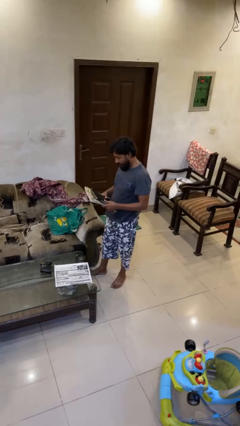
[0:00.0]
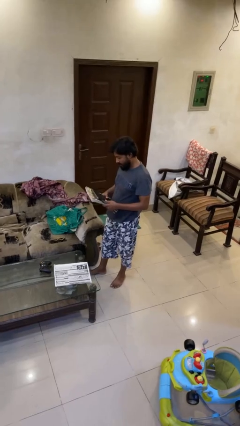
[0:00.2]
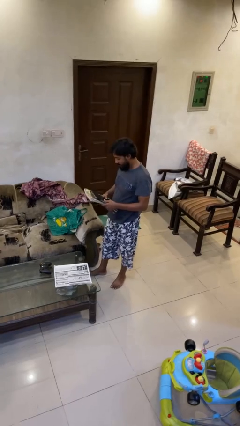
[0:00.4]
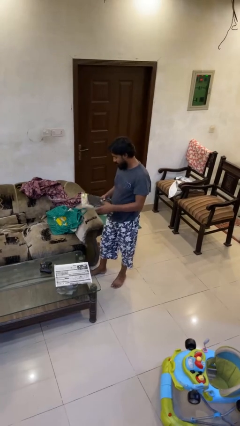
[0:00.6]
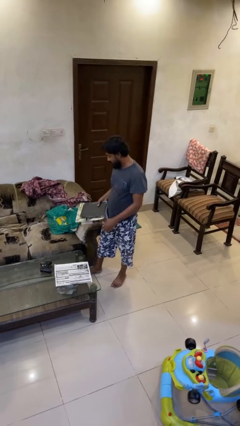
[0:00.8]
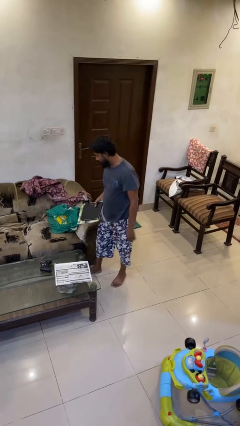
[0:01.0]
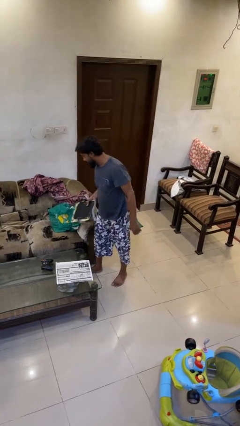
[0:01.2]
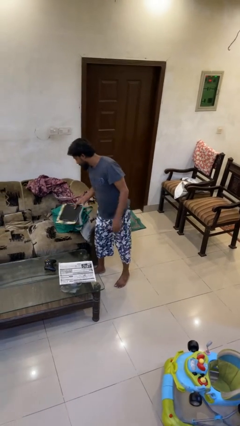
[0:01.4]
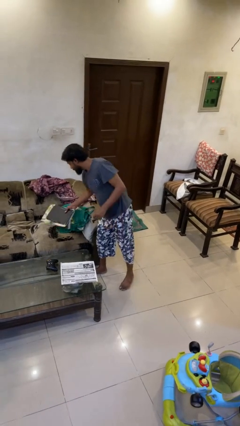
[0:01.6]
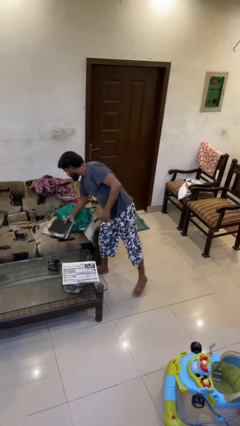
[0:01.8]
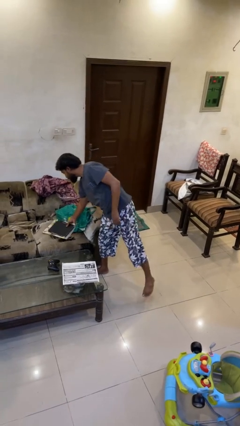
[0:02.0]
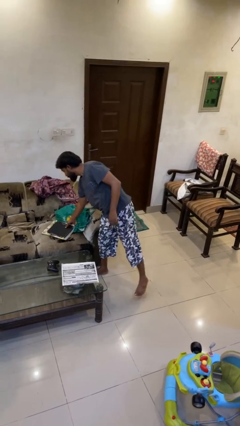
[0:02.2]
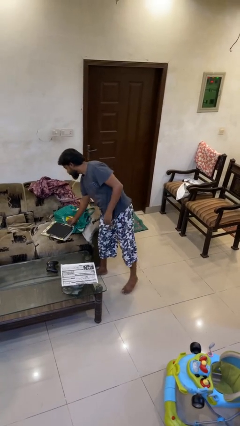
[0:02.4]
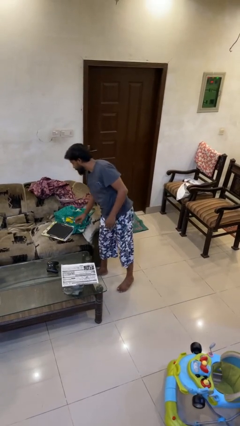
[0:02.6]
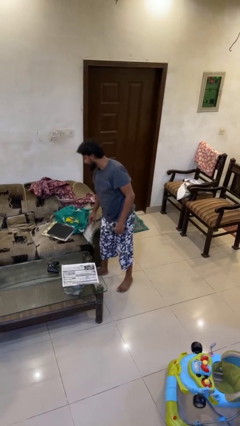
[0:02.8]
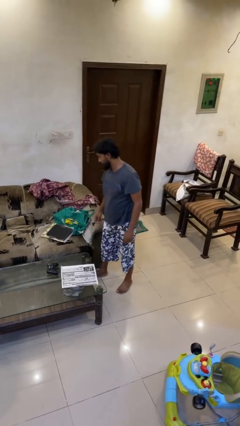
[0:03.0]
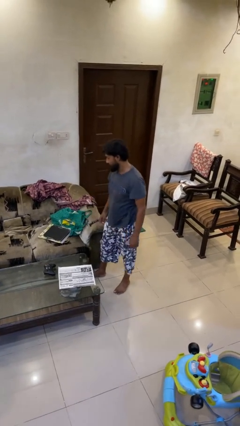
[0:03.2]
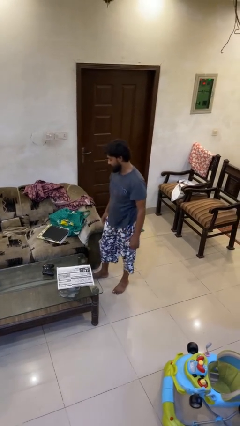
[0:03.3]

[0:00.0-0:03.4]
person puts down object on couch

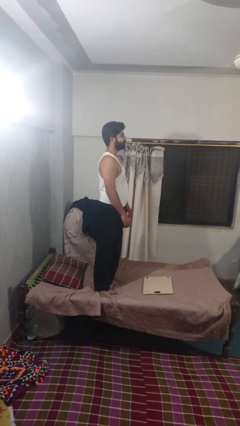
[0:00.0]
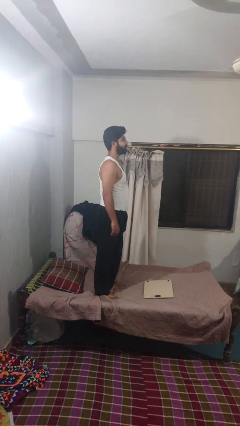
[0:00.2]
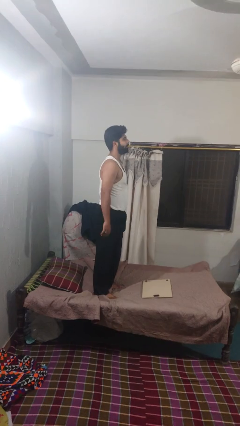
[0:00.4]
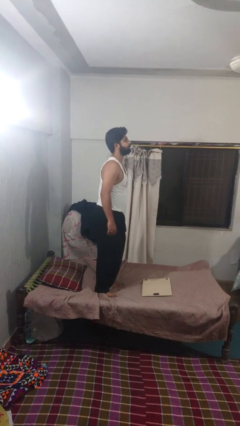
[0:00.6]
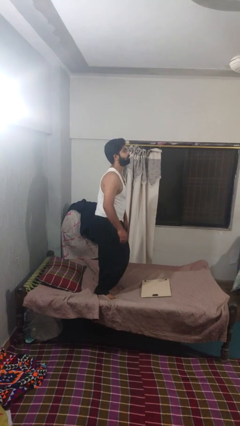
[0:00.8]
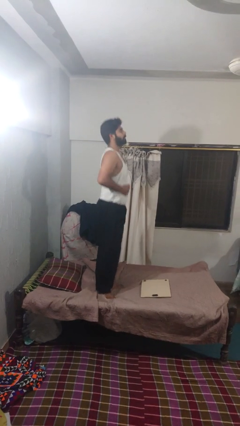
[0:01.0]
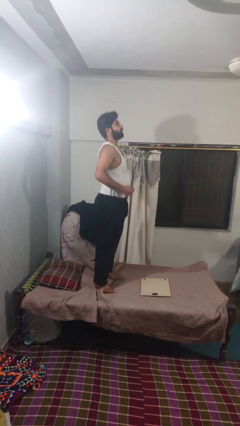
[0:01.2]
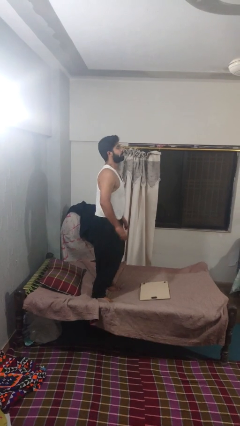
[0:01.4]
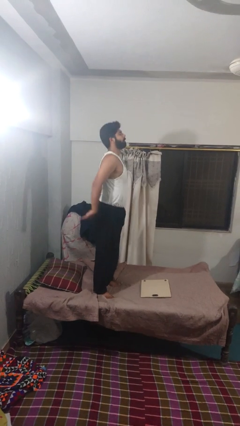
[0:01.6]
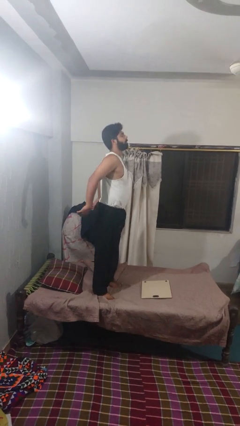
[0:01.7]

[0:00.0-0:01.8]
person jumps on bed

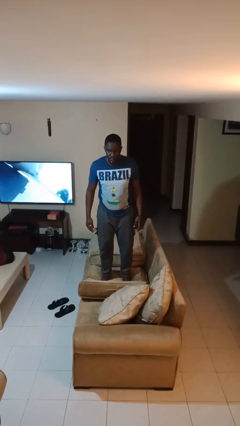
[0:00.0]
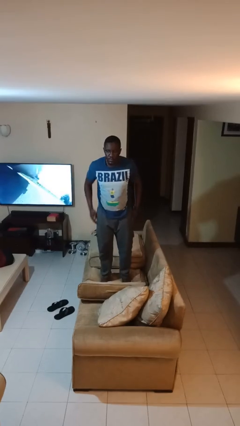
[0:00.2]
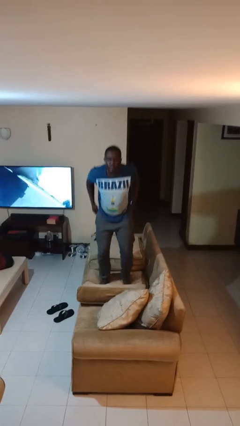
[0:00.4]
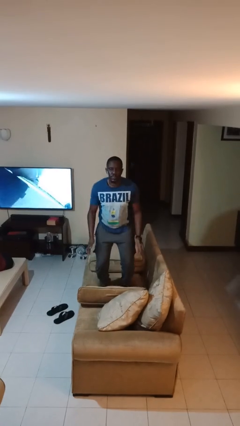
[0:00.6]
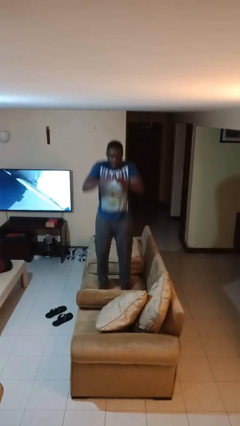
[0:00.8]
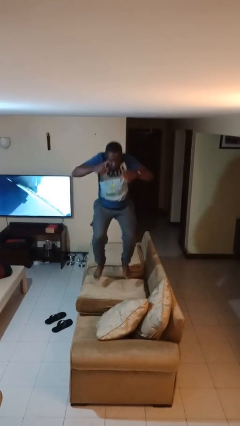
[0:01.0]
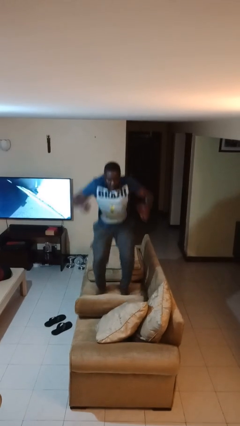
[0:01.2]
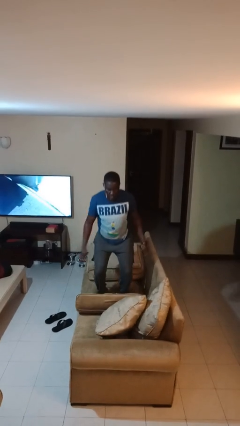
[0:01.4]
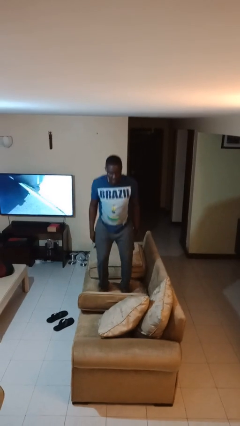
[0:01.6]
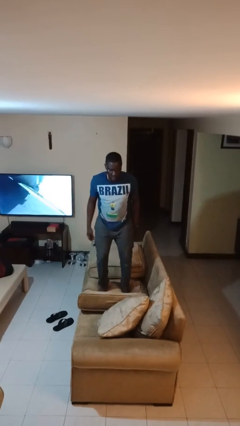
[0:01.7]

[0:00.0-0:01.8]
person jumps on couch

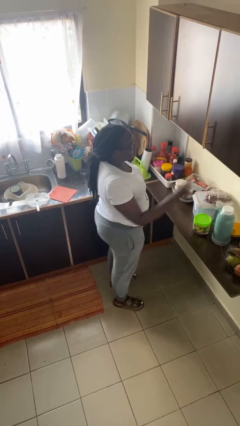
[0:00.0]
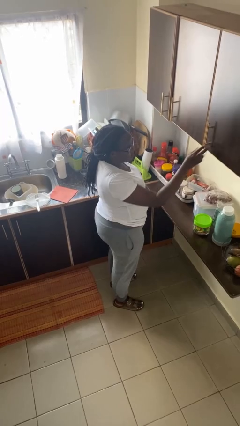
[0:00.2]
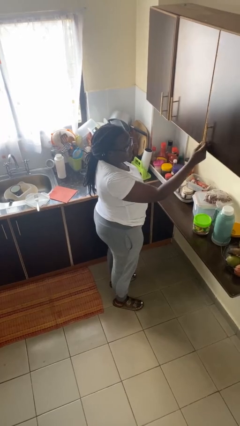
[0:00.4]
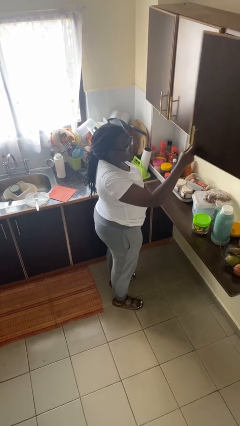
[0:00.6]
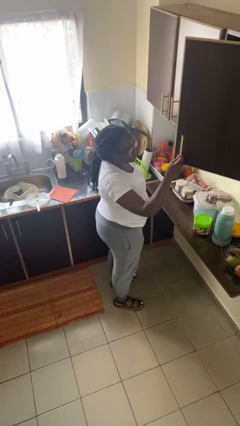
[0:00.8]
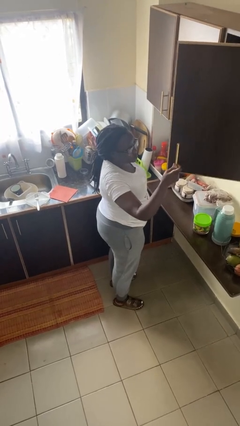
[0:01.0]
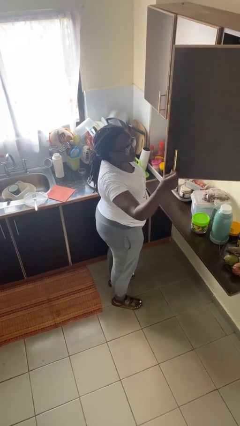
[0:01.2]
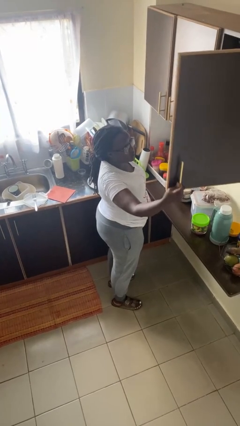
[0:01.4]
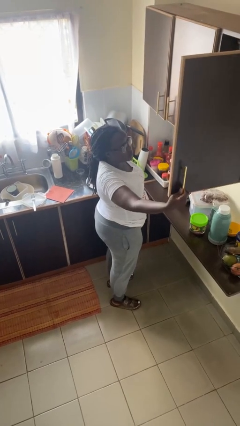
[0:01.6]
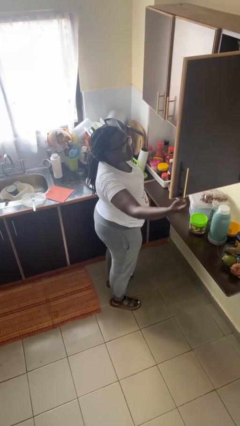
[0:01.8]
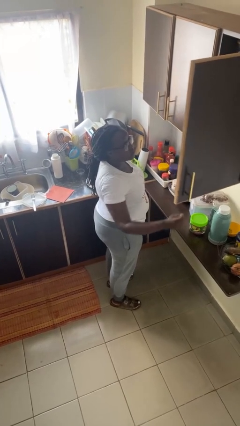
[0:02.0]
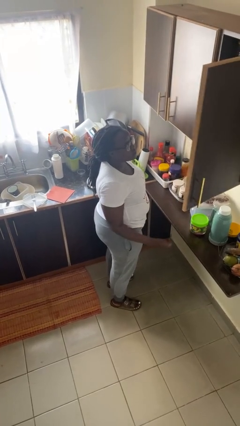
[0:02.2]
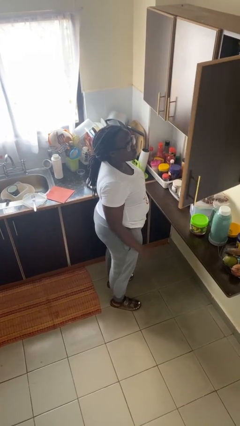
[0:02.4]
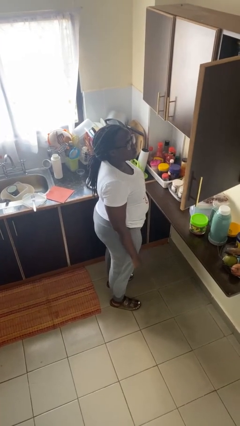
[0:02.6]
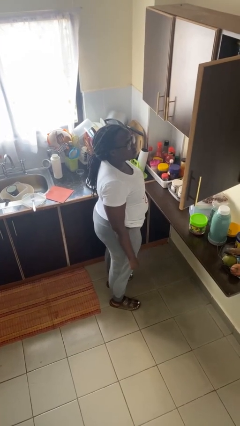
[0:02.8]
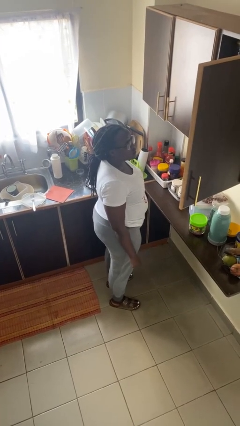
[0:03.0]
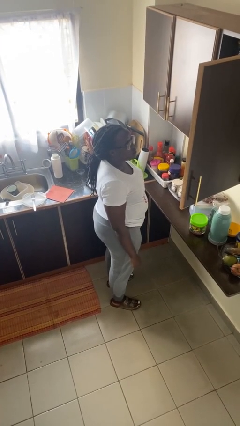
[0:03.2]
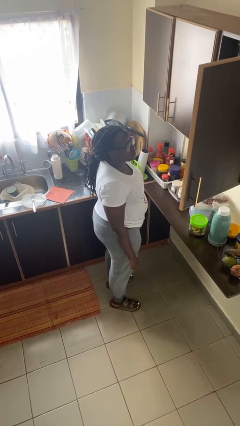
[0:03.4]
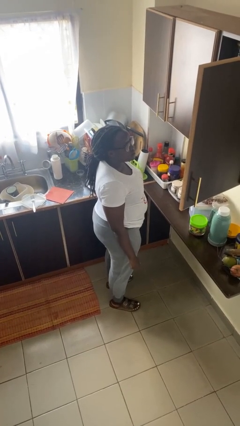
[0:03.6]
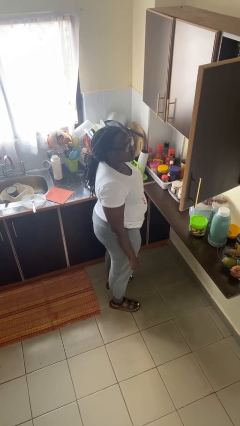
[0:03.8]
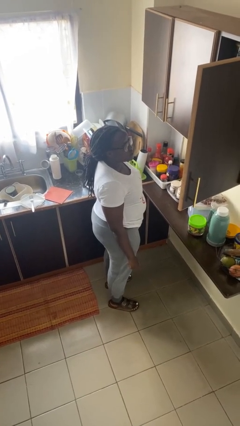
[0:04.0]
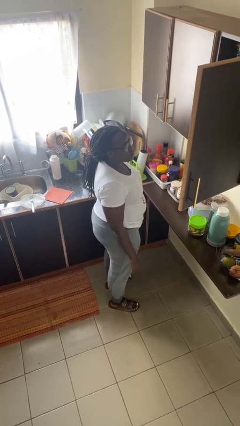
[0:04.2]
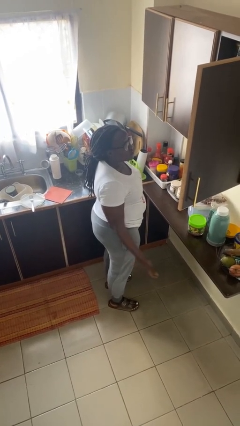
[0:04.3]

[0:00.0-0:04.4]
person opens cabinet

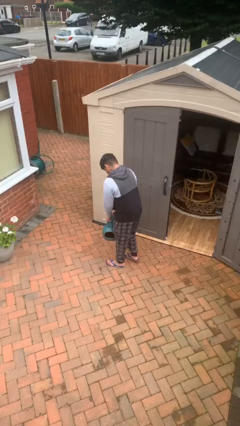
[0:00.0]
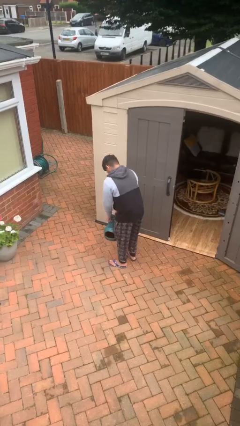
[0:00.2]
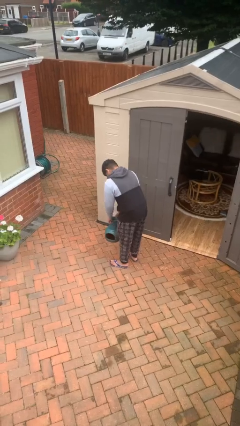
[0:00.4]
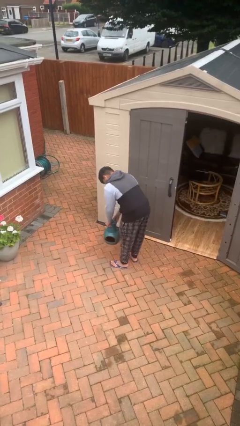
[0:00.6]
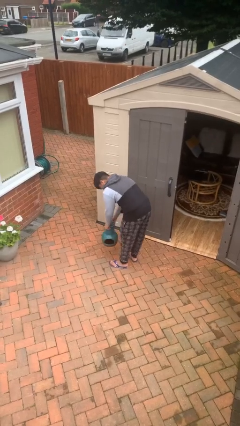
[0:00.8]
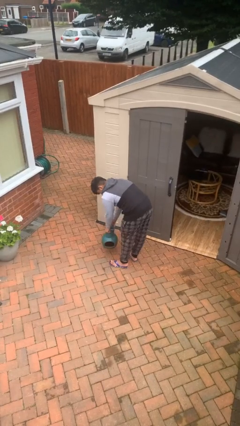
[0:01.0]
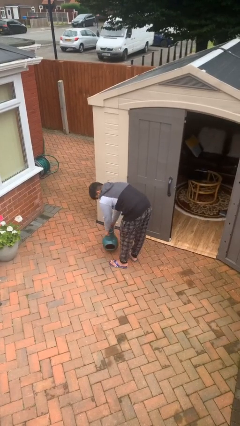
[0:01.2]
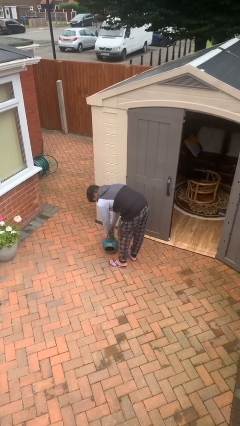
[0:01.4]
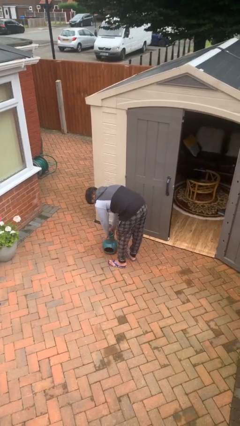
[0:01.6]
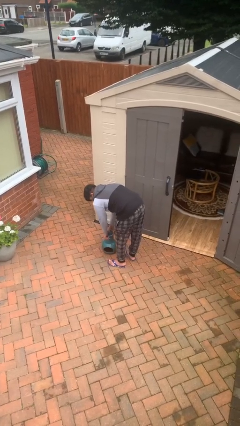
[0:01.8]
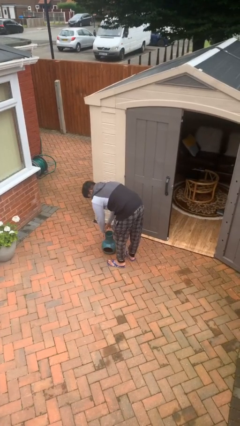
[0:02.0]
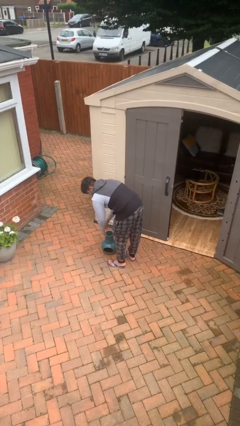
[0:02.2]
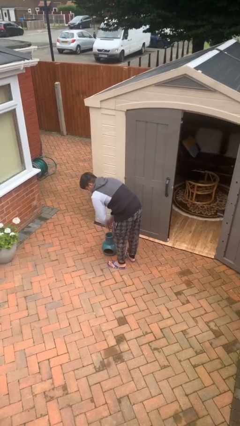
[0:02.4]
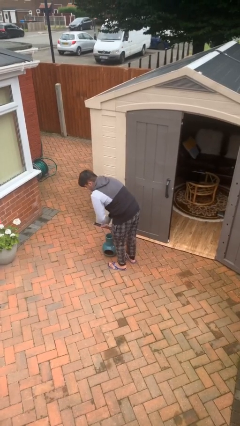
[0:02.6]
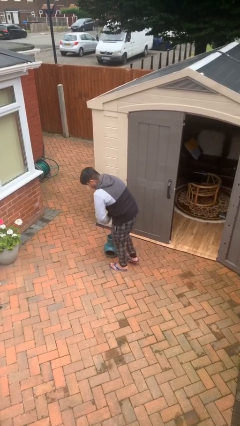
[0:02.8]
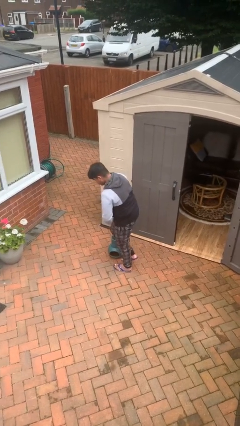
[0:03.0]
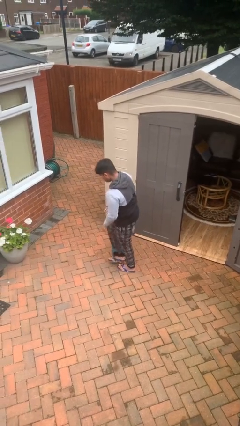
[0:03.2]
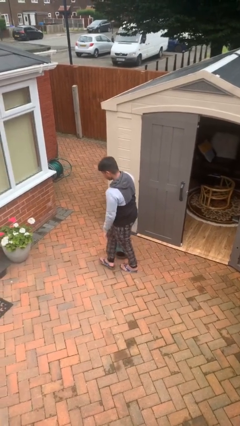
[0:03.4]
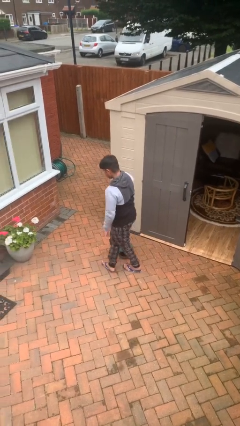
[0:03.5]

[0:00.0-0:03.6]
person puts down object on floor

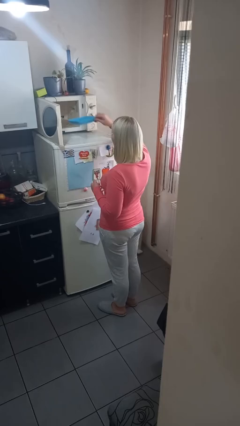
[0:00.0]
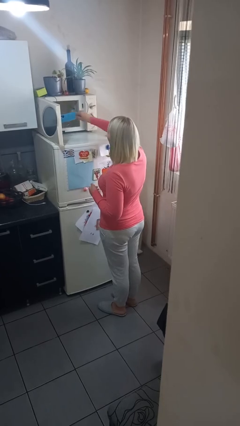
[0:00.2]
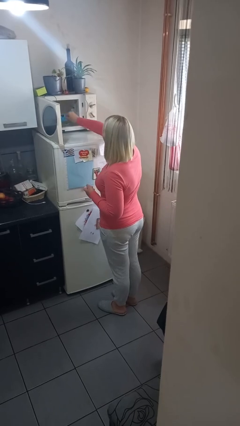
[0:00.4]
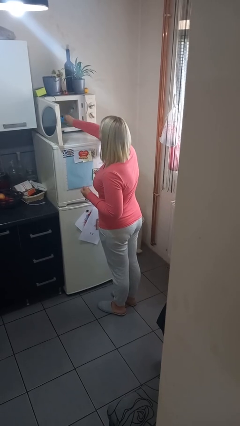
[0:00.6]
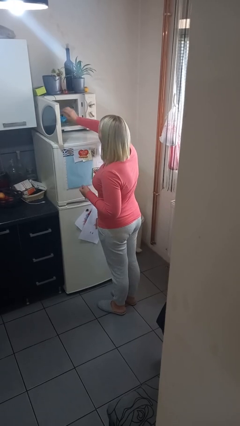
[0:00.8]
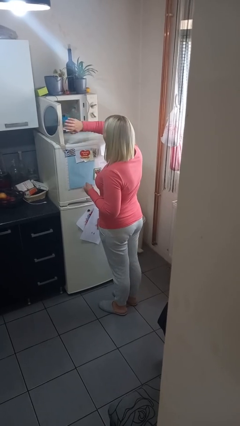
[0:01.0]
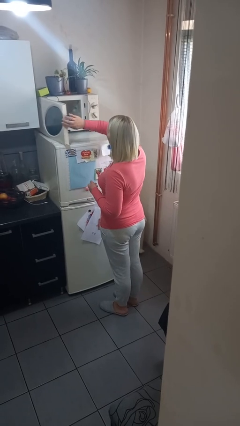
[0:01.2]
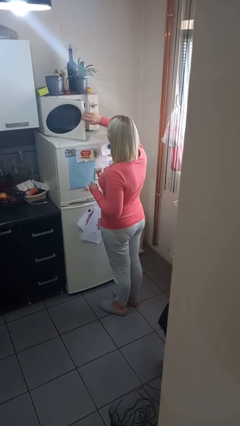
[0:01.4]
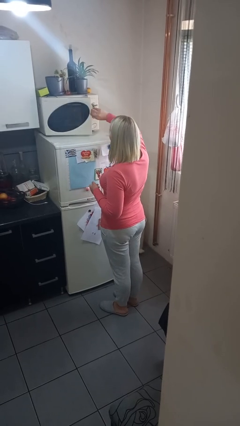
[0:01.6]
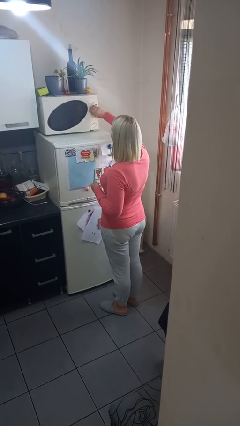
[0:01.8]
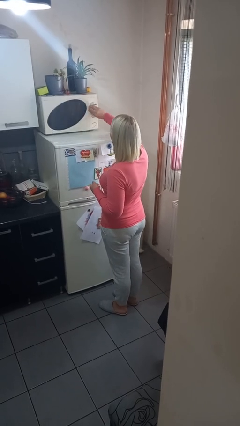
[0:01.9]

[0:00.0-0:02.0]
person puts object into microwave
